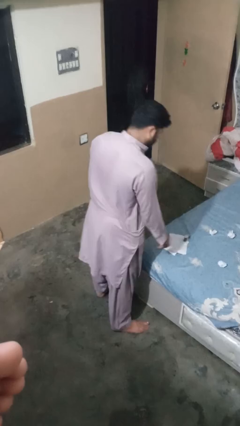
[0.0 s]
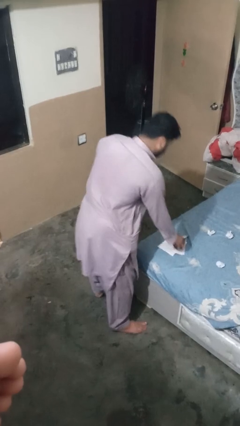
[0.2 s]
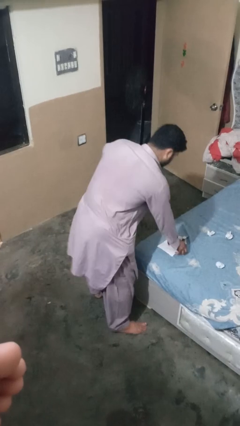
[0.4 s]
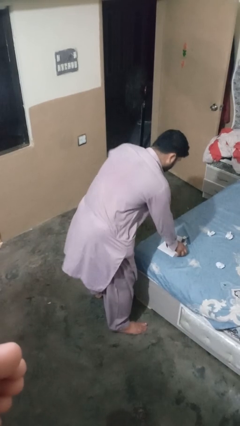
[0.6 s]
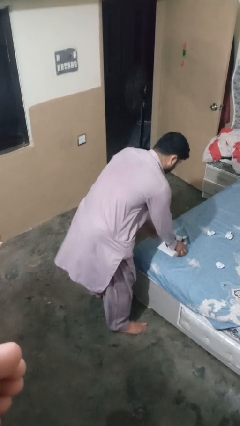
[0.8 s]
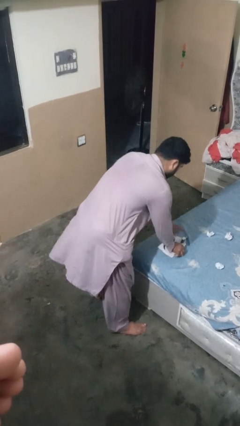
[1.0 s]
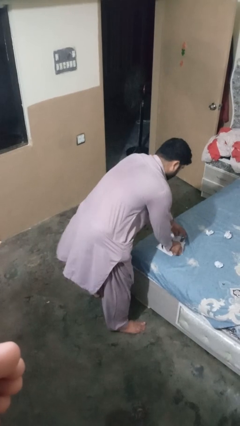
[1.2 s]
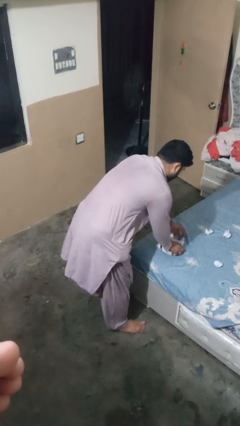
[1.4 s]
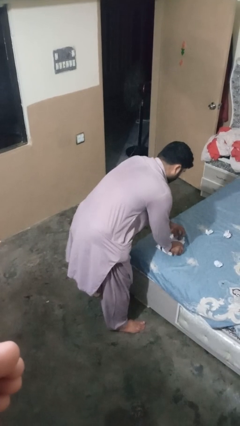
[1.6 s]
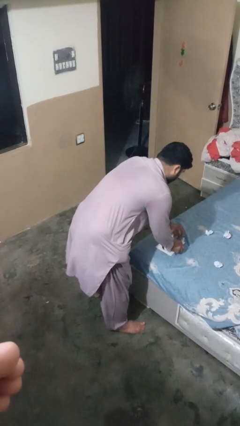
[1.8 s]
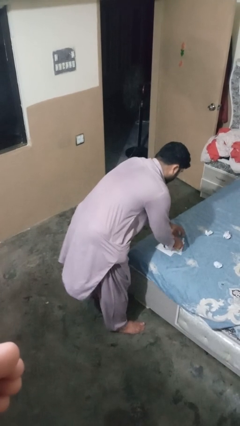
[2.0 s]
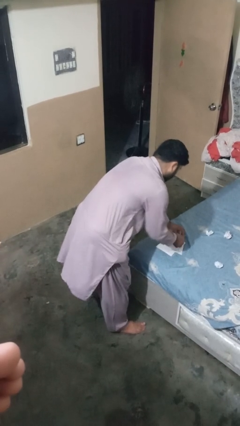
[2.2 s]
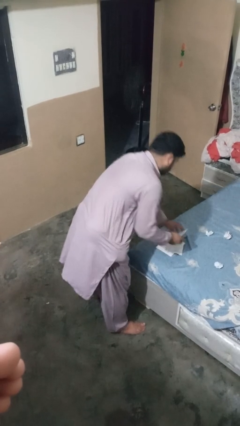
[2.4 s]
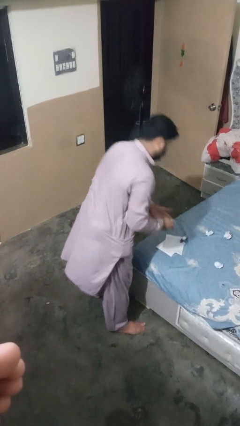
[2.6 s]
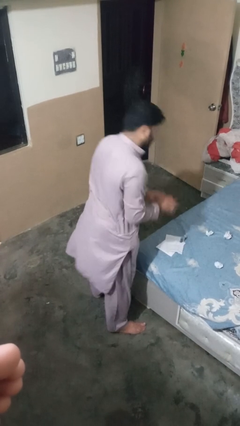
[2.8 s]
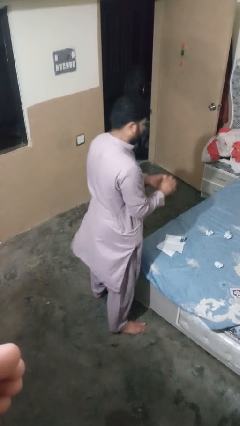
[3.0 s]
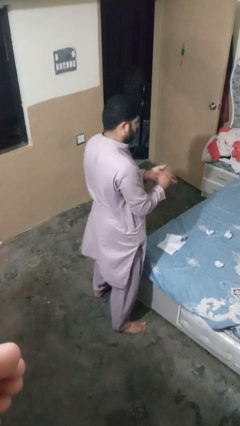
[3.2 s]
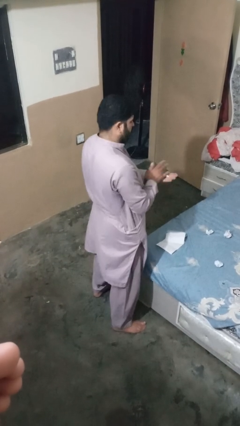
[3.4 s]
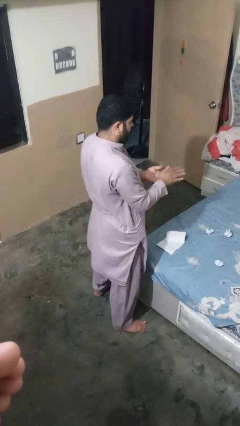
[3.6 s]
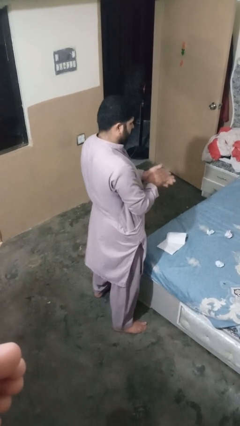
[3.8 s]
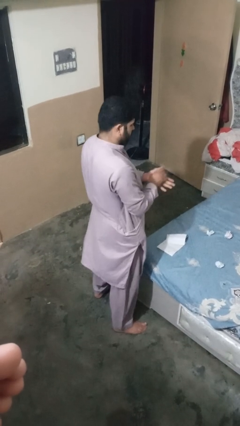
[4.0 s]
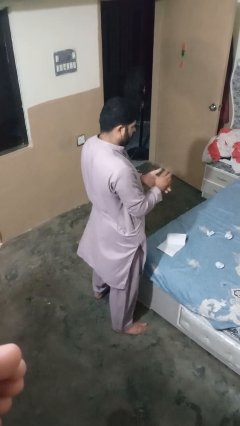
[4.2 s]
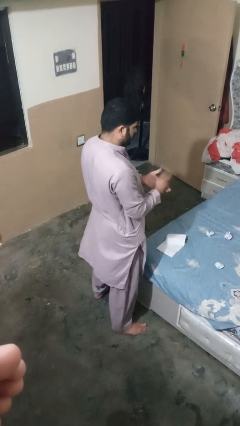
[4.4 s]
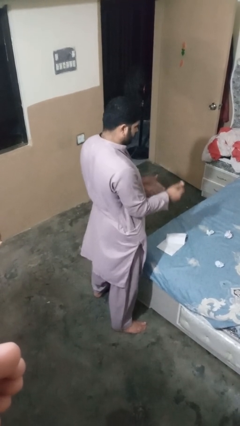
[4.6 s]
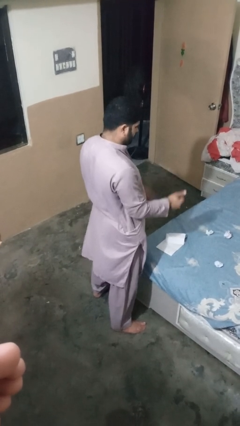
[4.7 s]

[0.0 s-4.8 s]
person crumples paper

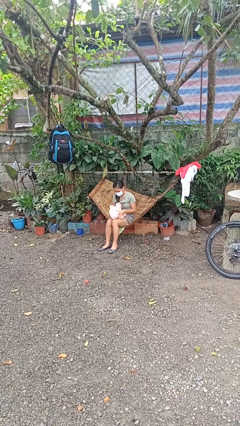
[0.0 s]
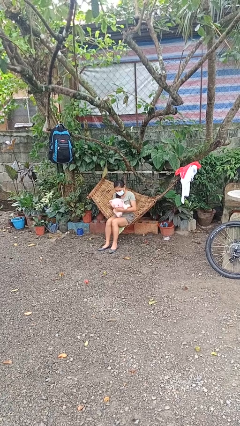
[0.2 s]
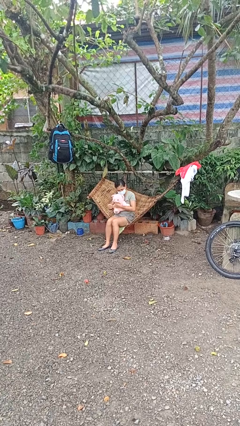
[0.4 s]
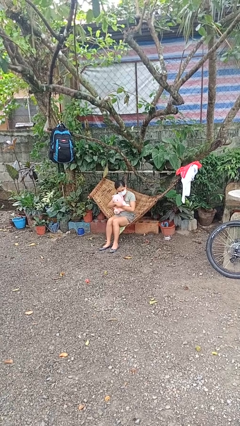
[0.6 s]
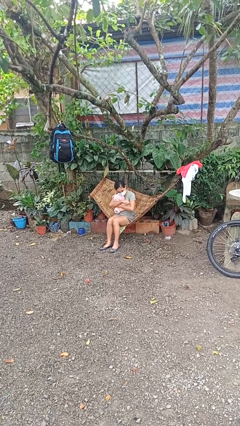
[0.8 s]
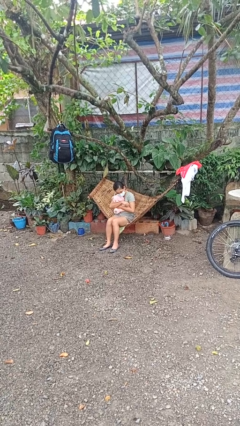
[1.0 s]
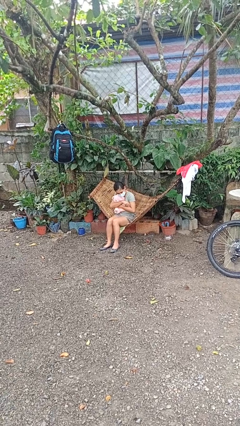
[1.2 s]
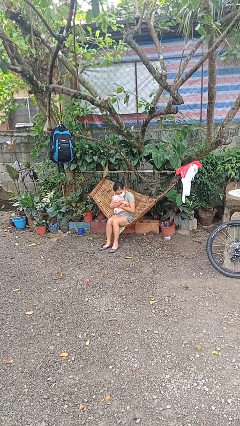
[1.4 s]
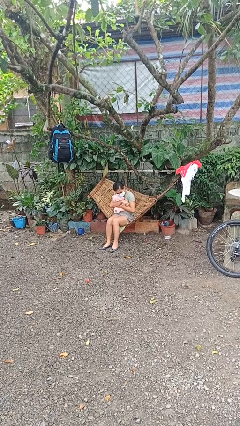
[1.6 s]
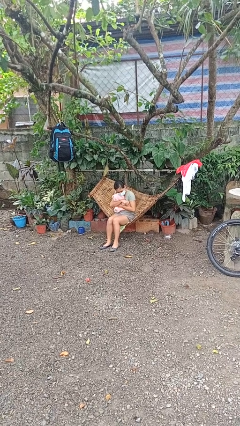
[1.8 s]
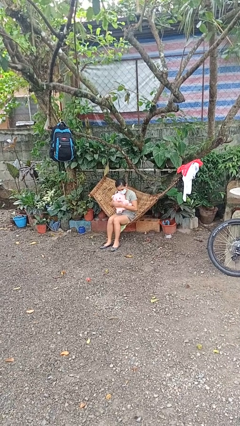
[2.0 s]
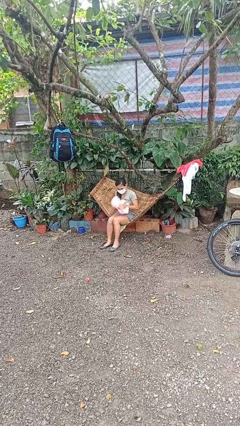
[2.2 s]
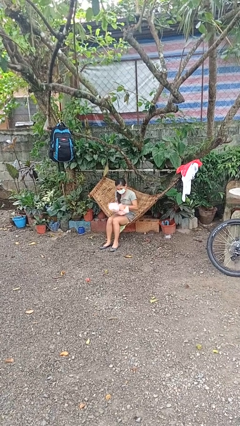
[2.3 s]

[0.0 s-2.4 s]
person hugs stuffed animal

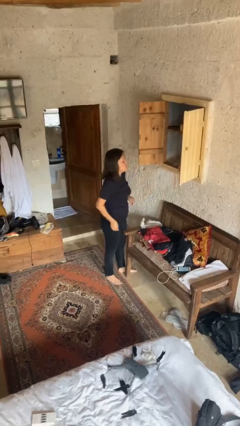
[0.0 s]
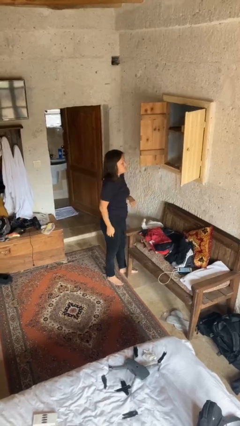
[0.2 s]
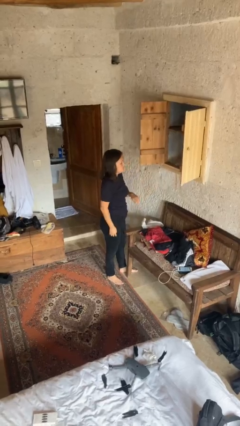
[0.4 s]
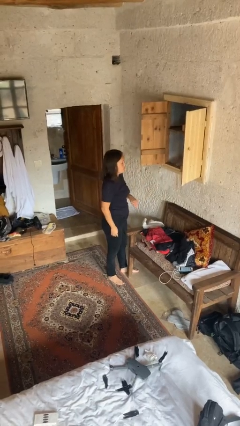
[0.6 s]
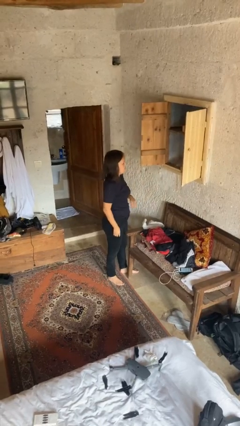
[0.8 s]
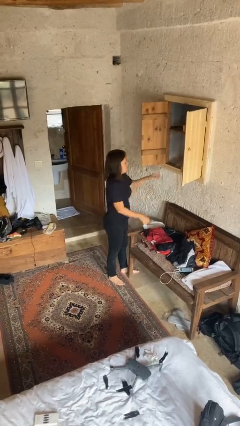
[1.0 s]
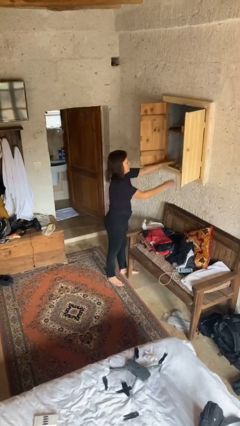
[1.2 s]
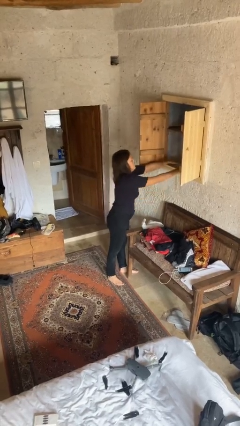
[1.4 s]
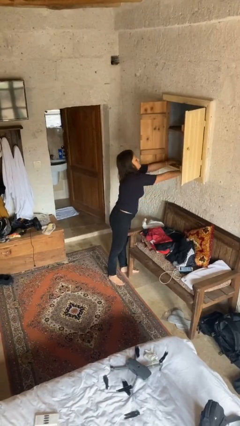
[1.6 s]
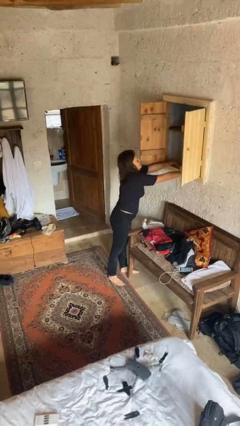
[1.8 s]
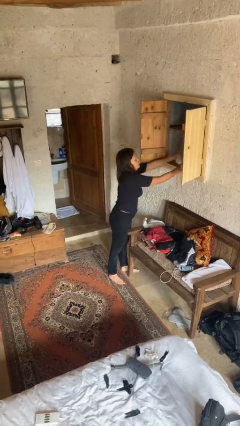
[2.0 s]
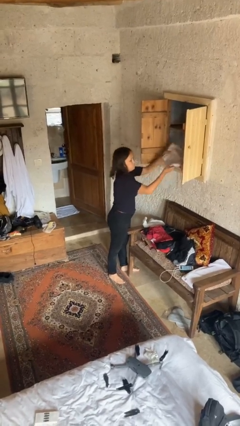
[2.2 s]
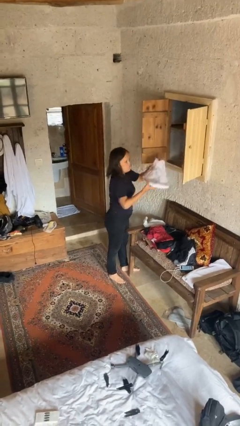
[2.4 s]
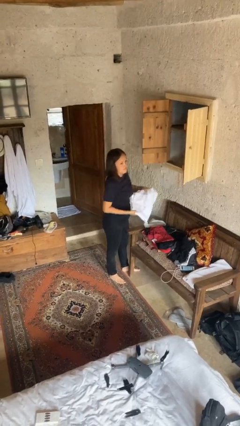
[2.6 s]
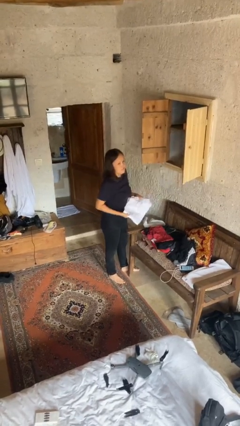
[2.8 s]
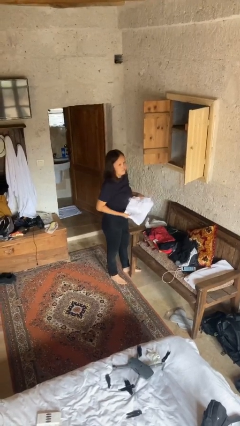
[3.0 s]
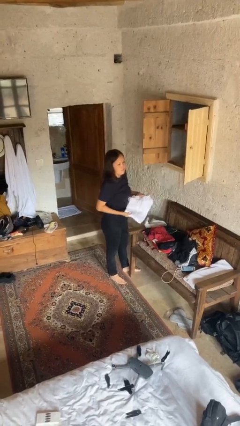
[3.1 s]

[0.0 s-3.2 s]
person takes clothes from dresser

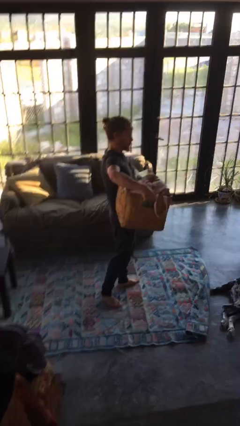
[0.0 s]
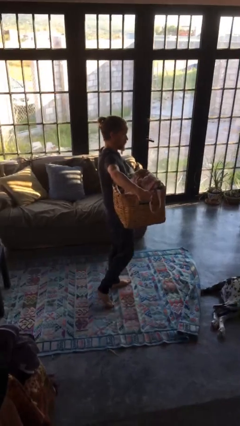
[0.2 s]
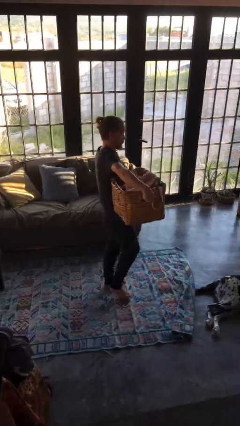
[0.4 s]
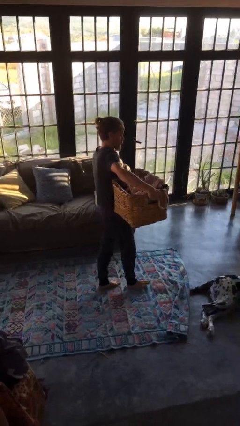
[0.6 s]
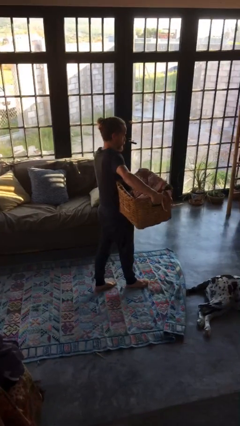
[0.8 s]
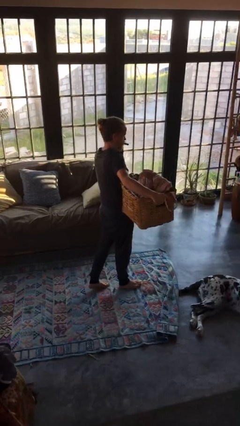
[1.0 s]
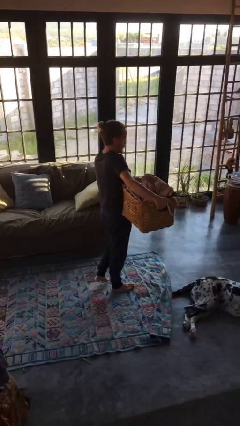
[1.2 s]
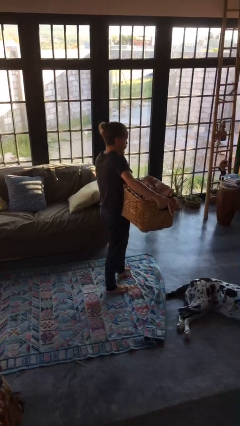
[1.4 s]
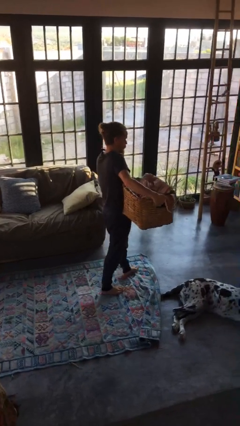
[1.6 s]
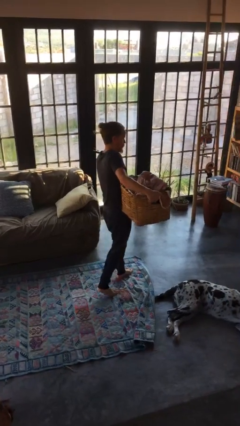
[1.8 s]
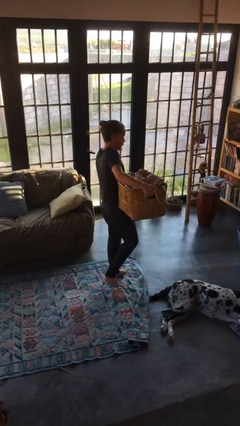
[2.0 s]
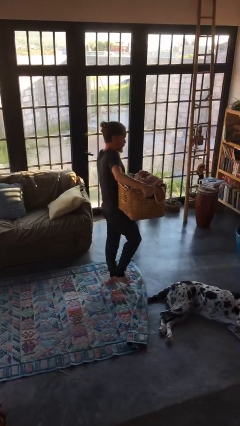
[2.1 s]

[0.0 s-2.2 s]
person carries laundry basket

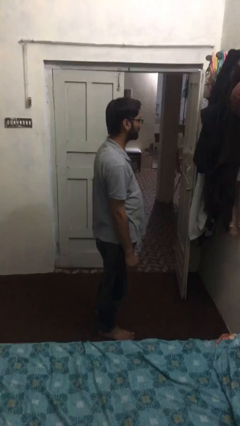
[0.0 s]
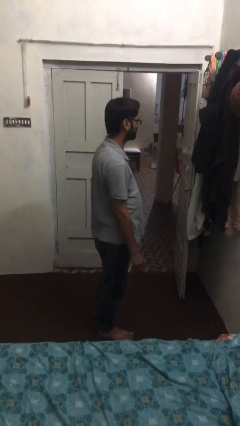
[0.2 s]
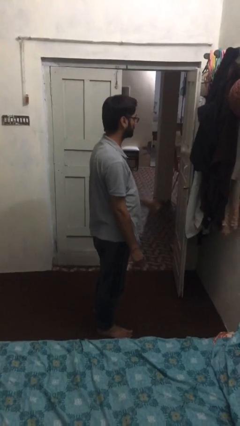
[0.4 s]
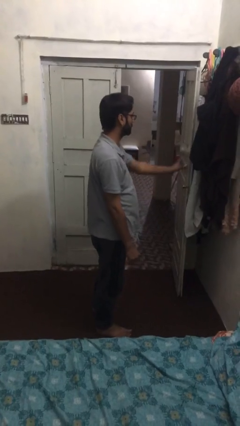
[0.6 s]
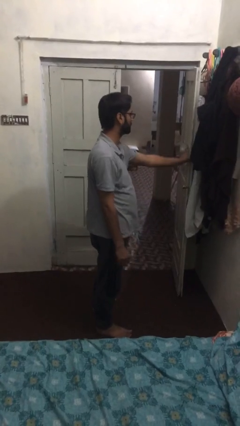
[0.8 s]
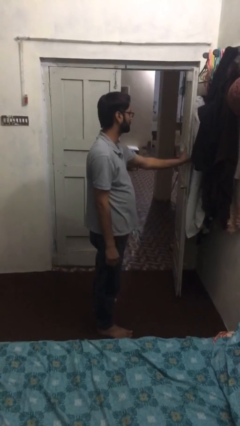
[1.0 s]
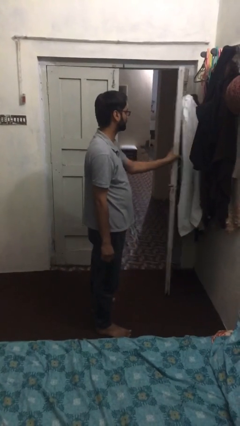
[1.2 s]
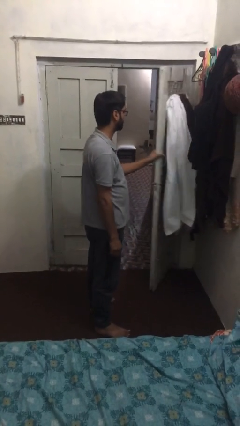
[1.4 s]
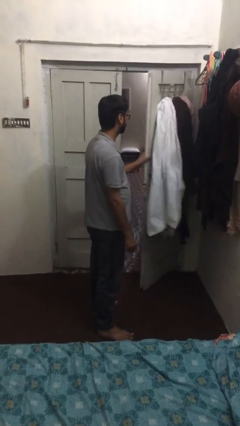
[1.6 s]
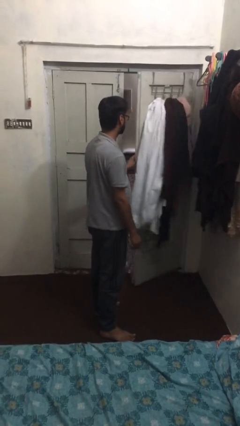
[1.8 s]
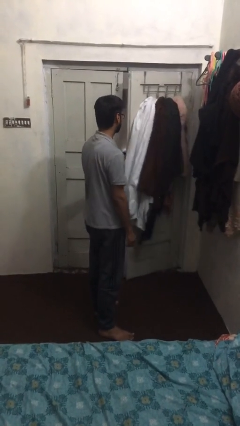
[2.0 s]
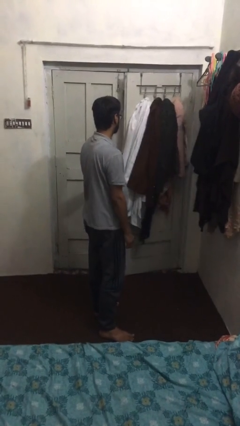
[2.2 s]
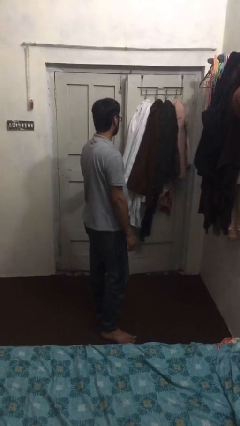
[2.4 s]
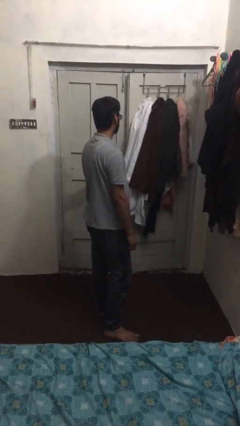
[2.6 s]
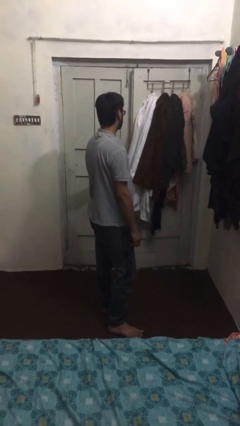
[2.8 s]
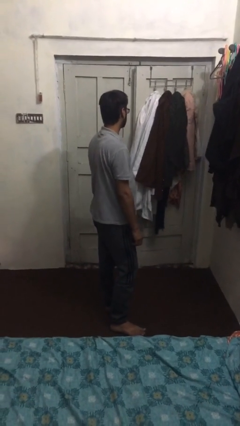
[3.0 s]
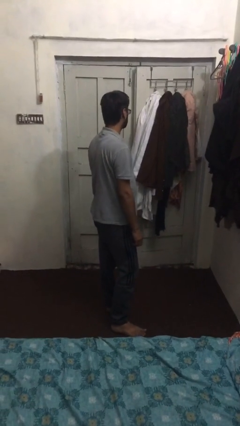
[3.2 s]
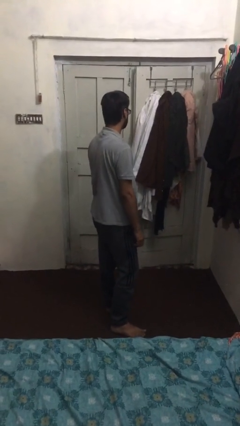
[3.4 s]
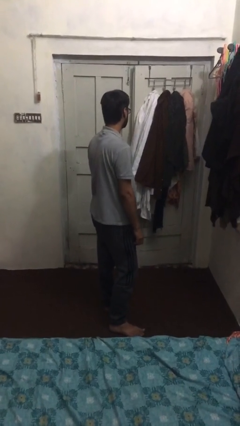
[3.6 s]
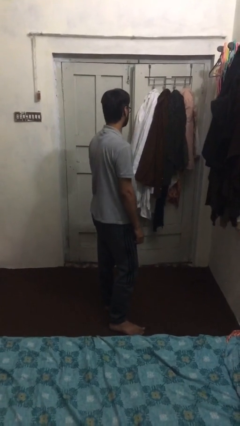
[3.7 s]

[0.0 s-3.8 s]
person closes facility door

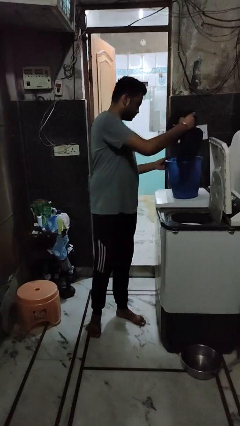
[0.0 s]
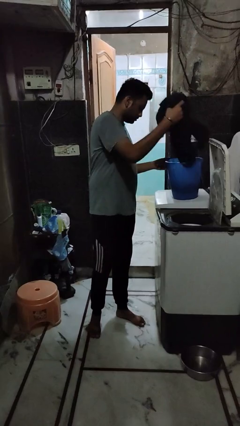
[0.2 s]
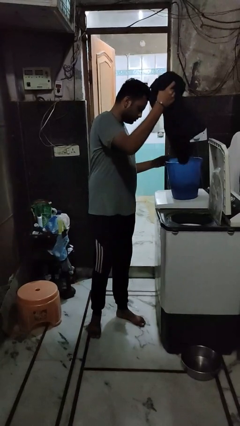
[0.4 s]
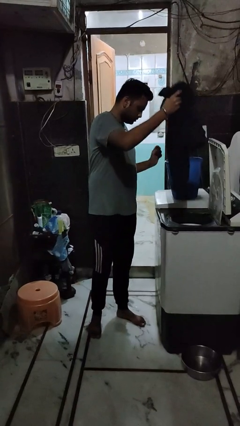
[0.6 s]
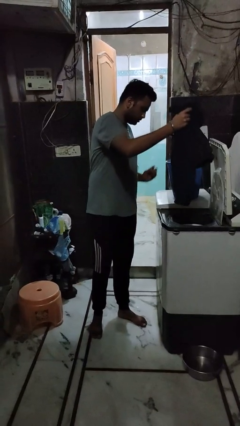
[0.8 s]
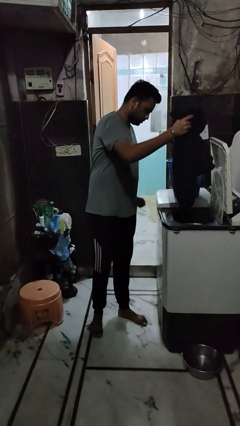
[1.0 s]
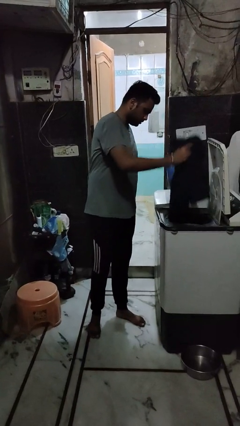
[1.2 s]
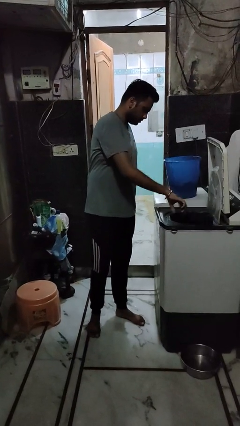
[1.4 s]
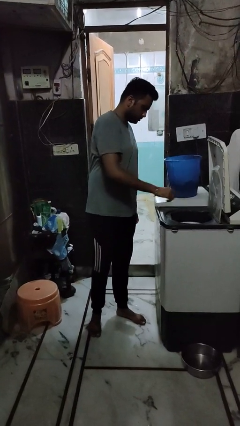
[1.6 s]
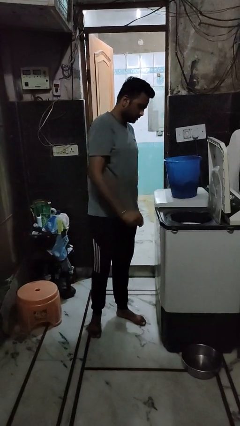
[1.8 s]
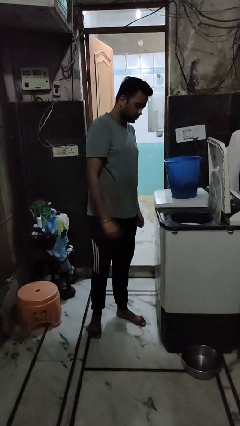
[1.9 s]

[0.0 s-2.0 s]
person loads dryer
